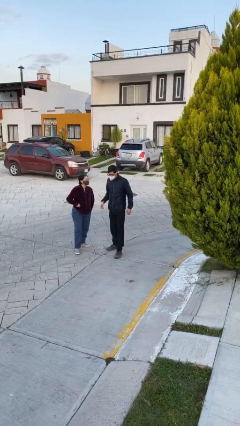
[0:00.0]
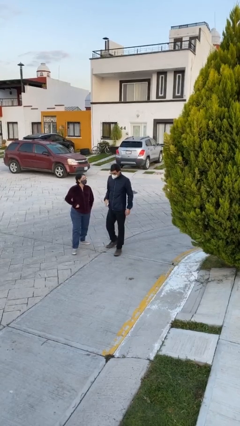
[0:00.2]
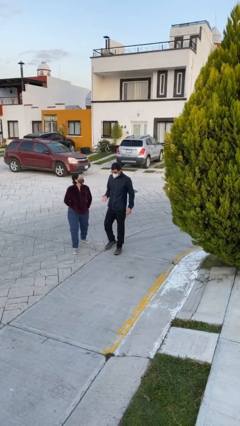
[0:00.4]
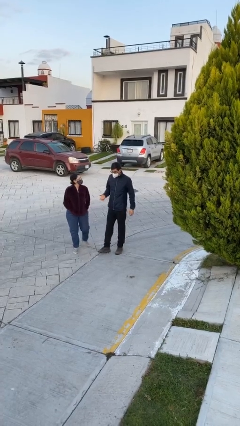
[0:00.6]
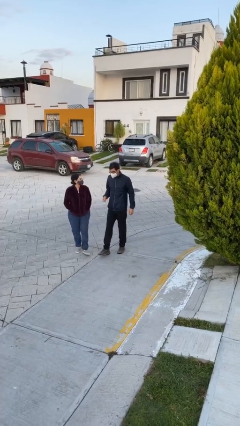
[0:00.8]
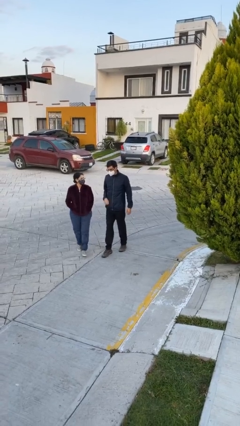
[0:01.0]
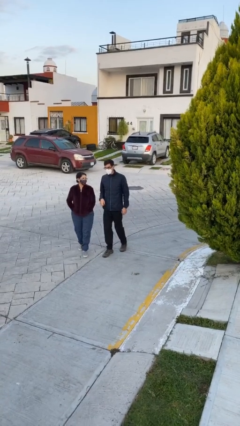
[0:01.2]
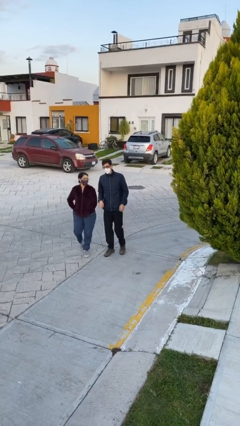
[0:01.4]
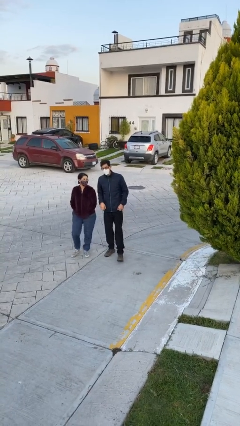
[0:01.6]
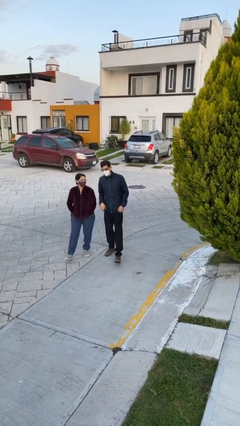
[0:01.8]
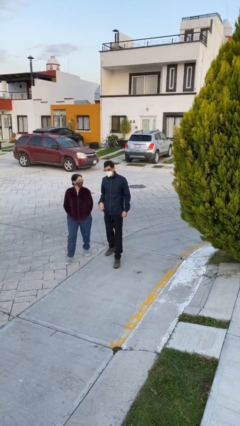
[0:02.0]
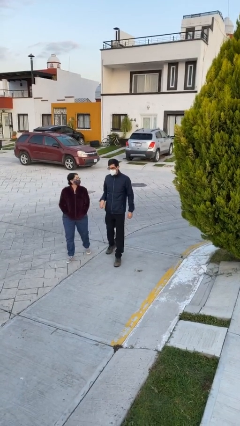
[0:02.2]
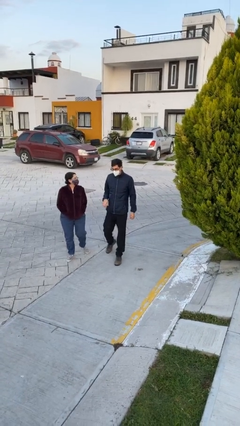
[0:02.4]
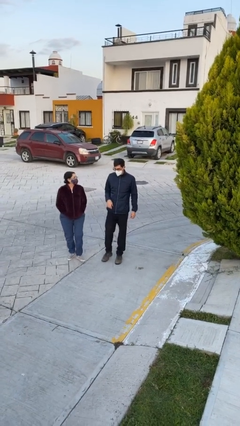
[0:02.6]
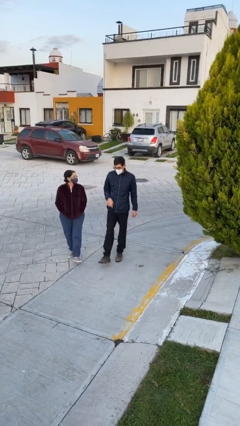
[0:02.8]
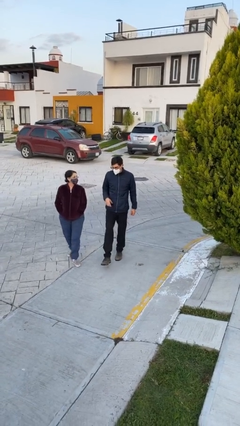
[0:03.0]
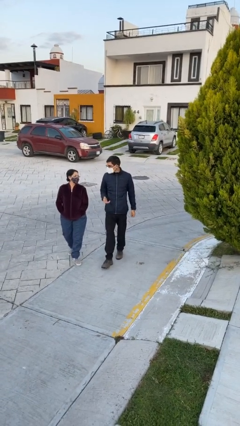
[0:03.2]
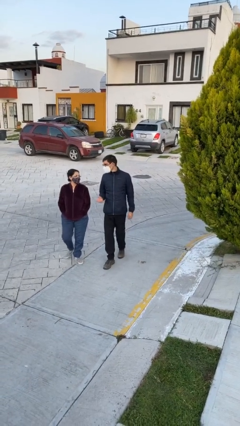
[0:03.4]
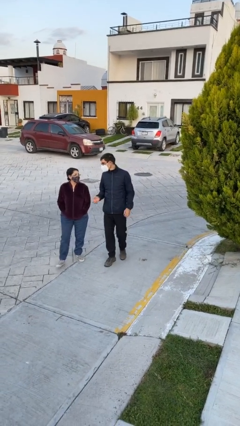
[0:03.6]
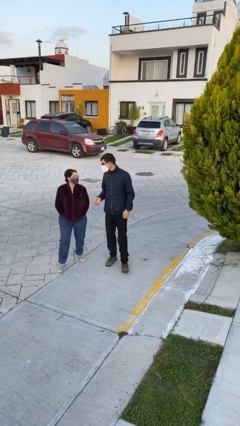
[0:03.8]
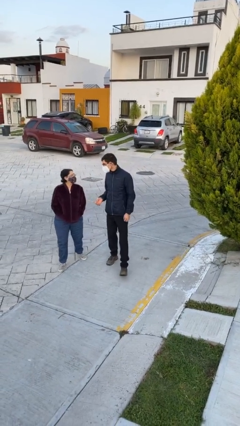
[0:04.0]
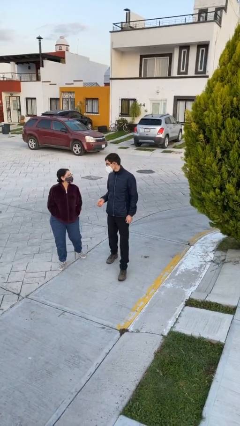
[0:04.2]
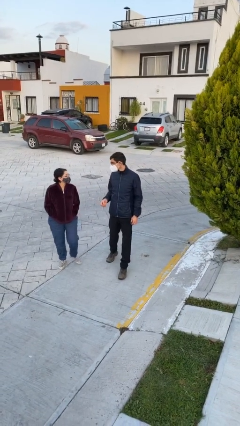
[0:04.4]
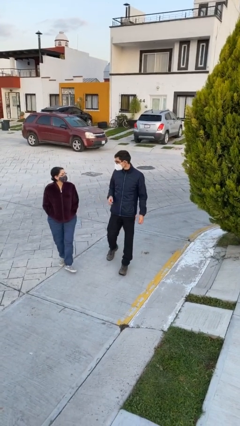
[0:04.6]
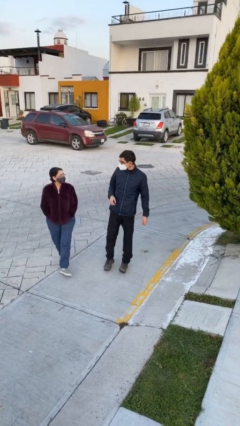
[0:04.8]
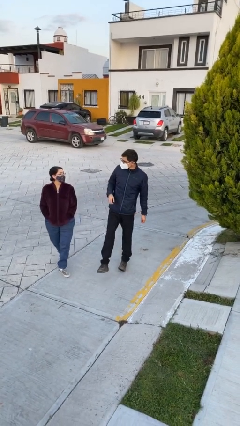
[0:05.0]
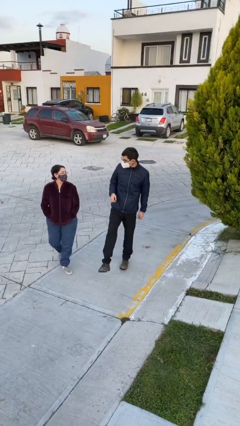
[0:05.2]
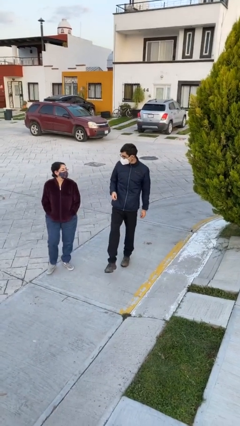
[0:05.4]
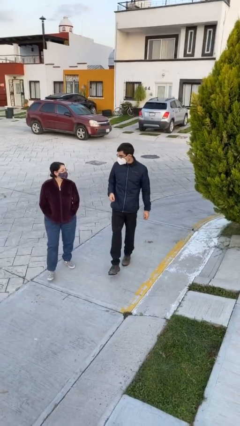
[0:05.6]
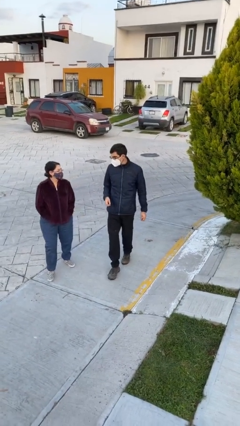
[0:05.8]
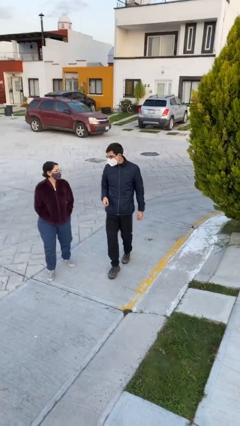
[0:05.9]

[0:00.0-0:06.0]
person talks to person

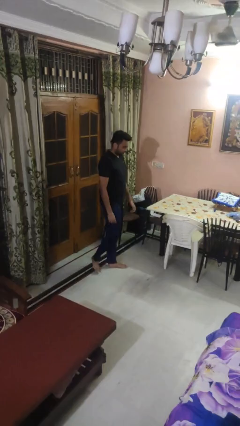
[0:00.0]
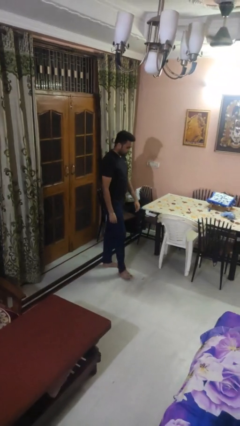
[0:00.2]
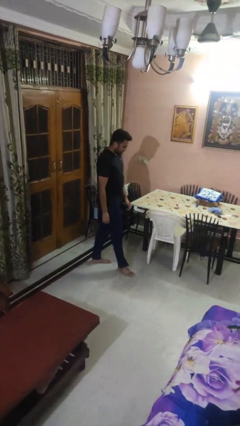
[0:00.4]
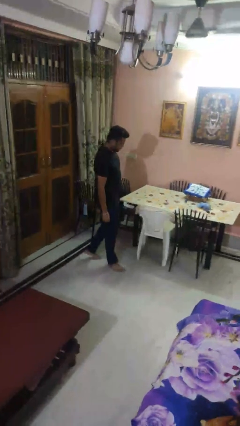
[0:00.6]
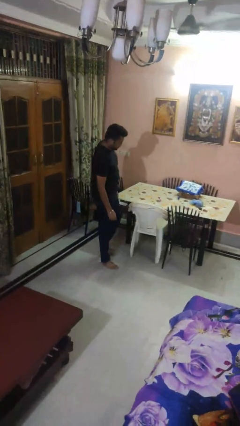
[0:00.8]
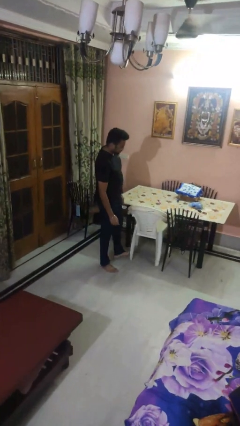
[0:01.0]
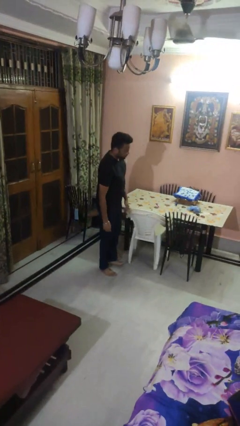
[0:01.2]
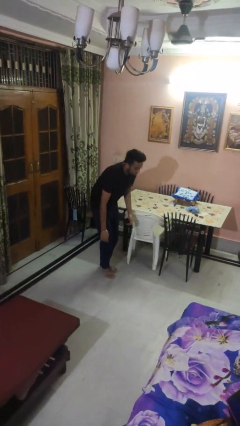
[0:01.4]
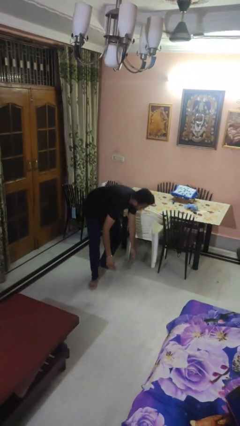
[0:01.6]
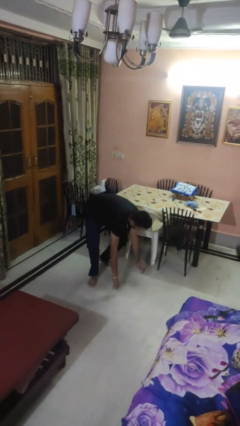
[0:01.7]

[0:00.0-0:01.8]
person trips on object on floor

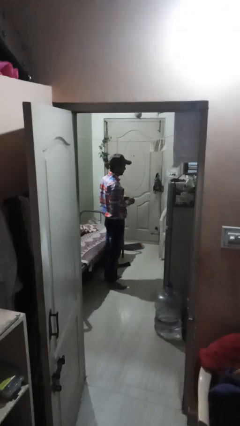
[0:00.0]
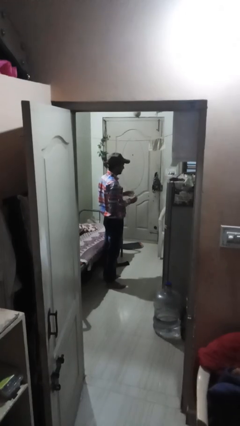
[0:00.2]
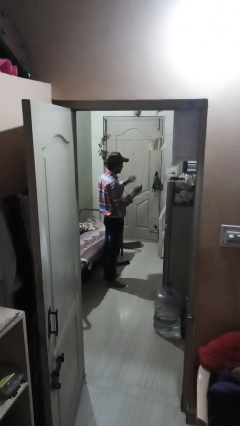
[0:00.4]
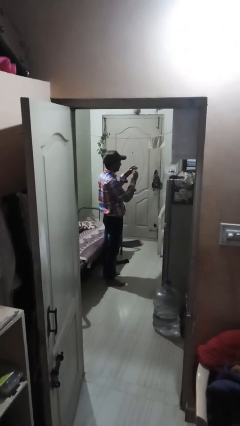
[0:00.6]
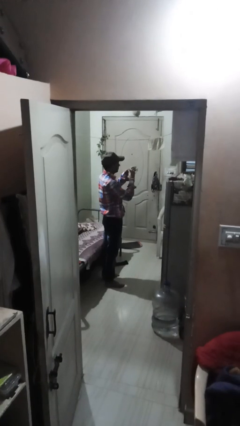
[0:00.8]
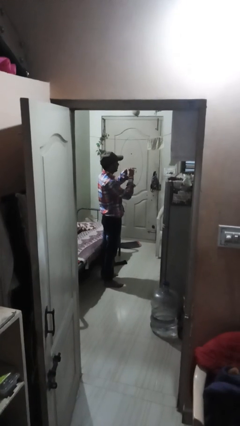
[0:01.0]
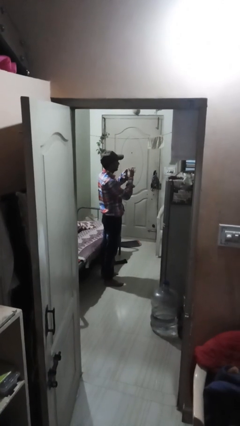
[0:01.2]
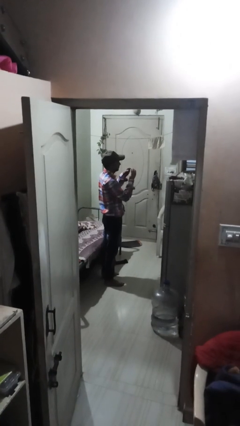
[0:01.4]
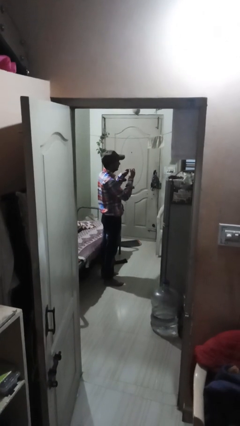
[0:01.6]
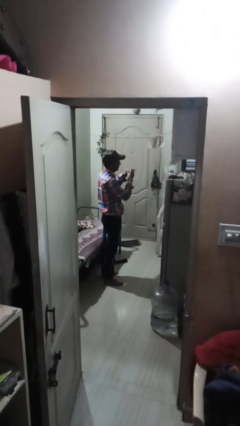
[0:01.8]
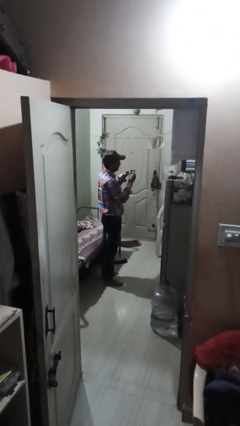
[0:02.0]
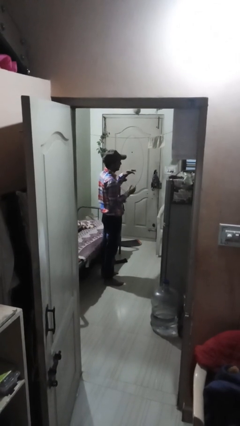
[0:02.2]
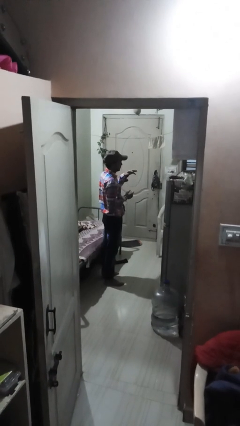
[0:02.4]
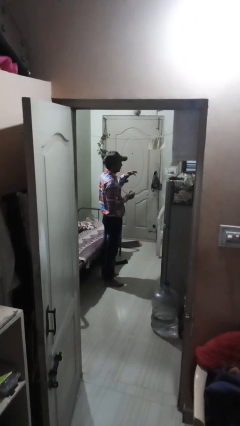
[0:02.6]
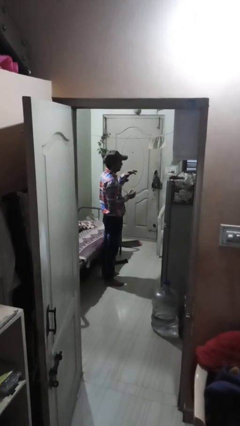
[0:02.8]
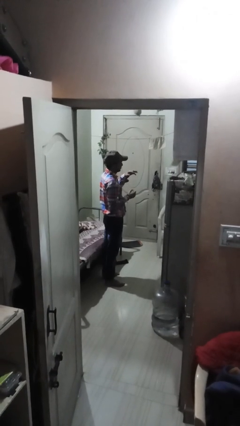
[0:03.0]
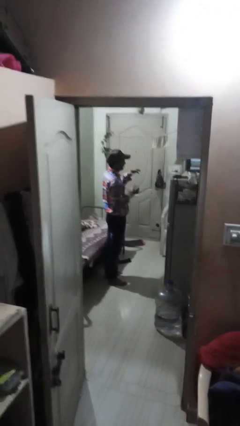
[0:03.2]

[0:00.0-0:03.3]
person puts on ring

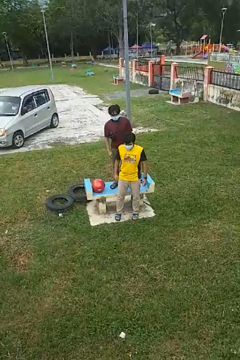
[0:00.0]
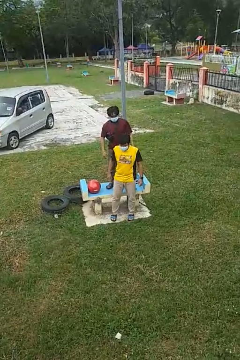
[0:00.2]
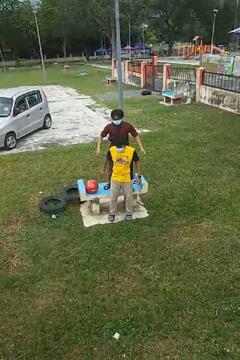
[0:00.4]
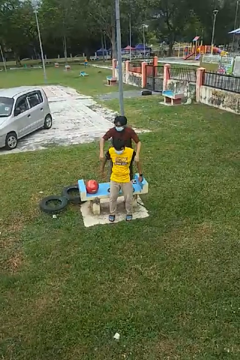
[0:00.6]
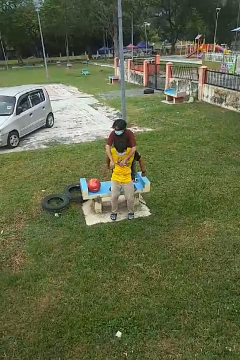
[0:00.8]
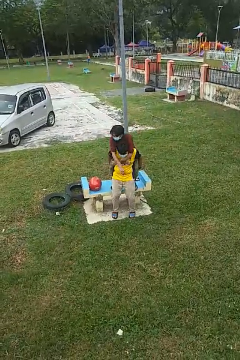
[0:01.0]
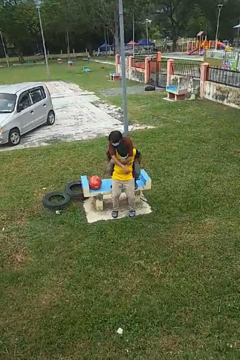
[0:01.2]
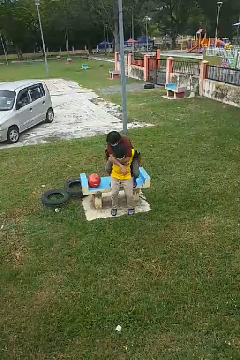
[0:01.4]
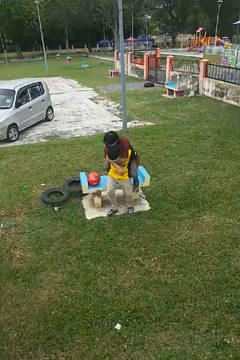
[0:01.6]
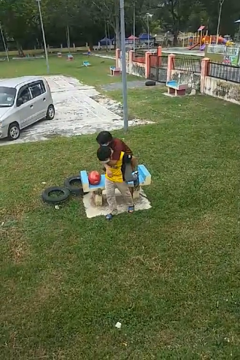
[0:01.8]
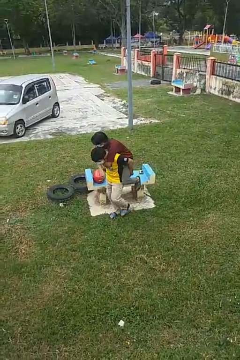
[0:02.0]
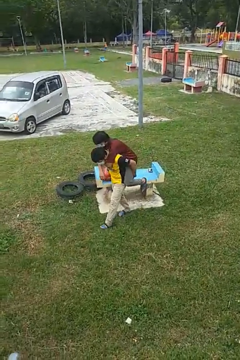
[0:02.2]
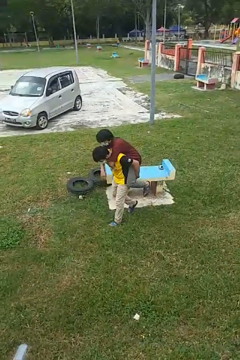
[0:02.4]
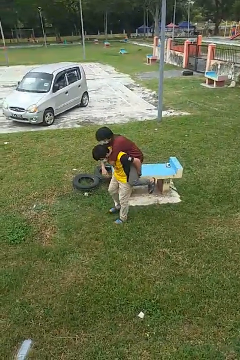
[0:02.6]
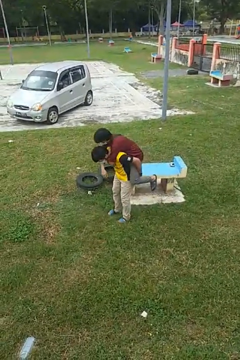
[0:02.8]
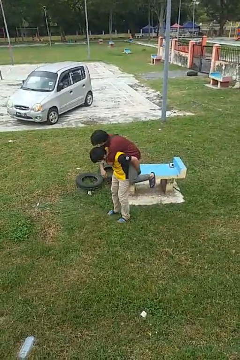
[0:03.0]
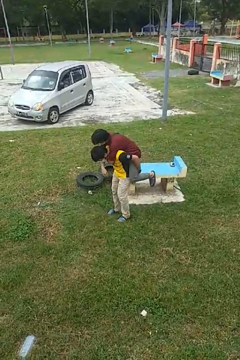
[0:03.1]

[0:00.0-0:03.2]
person carries person over shoulder

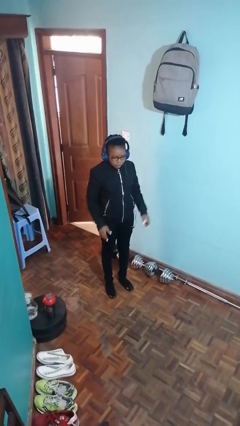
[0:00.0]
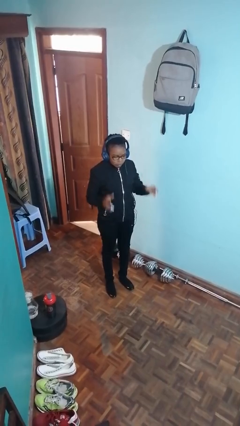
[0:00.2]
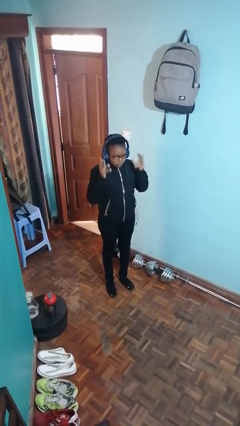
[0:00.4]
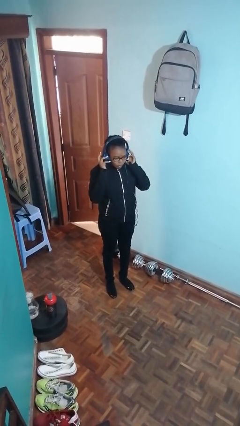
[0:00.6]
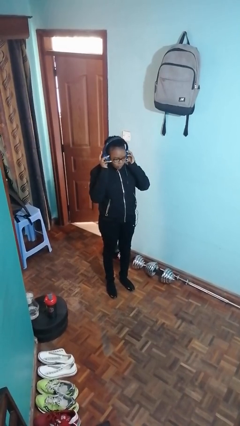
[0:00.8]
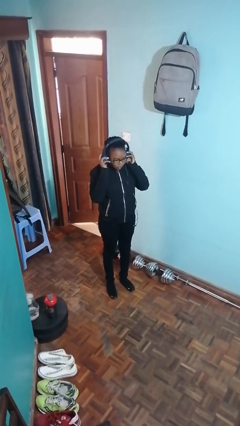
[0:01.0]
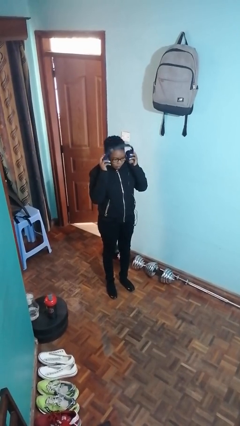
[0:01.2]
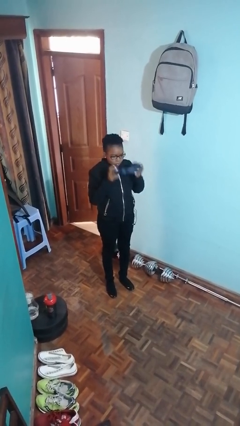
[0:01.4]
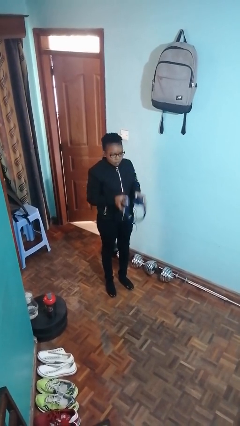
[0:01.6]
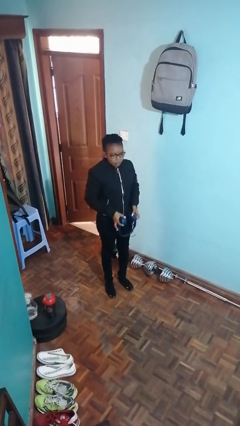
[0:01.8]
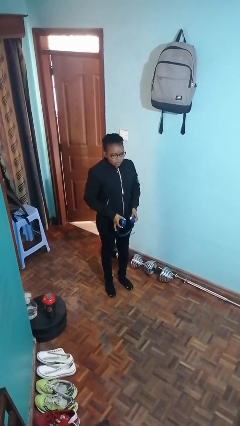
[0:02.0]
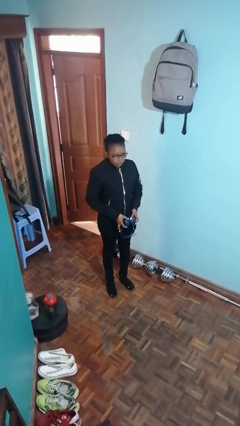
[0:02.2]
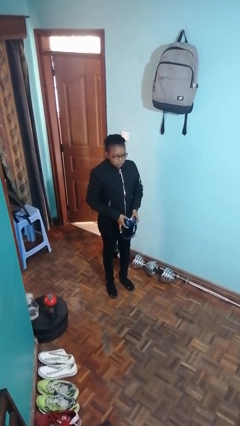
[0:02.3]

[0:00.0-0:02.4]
person takes off headphones

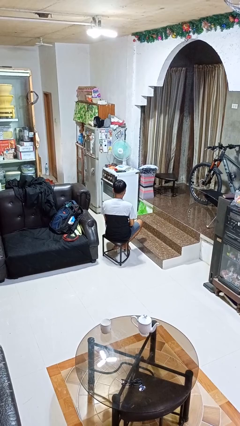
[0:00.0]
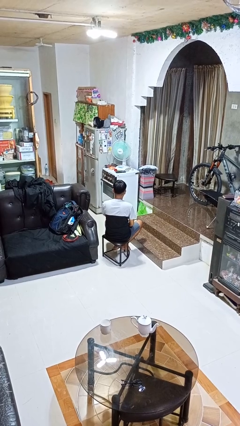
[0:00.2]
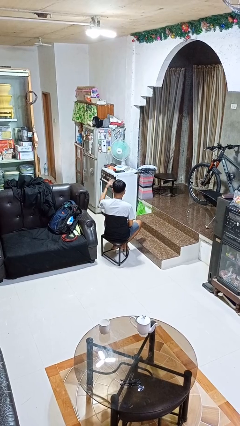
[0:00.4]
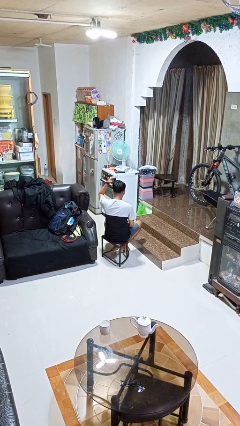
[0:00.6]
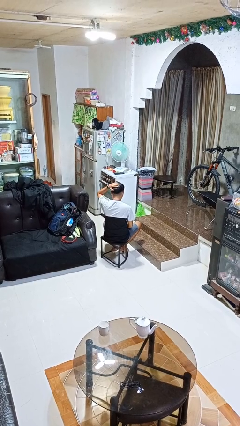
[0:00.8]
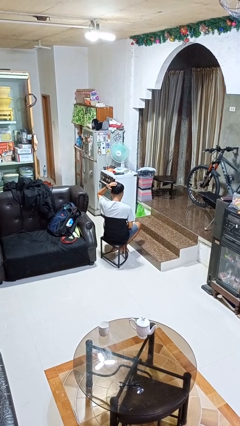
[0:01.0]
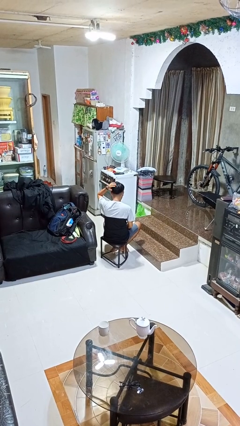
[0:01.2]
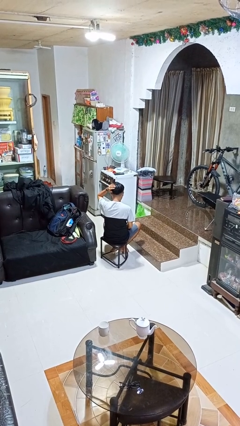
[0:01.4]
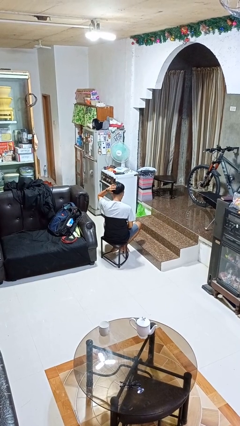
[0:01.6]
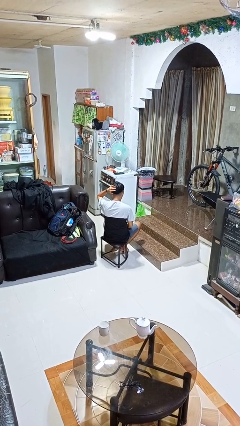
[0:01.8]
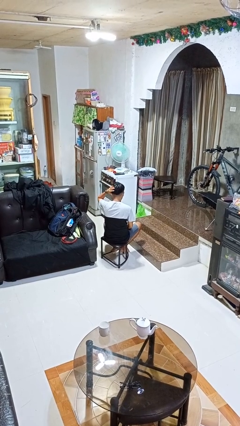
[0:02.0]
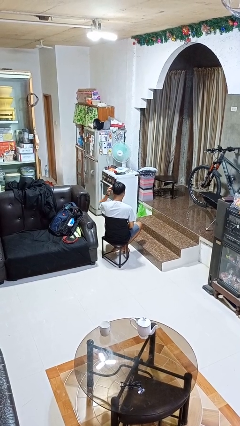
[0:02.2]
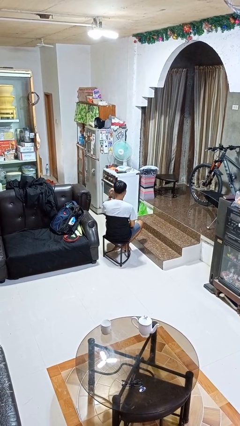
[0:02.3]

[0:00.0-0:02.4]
person pats head
